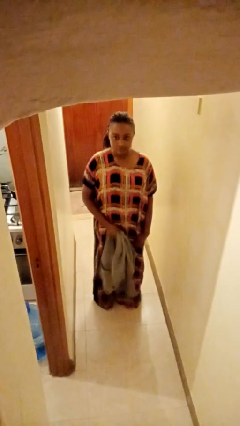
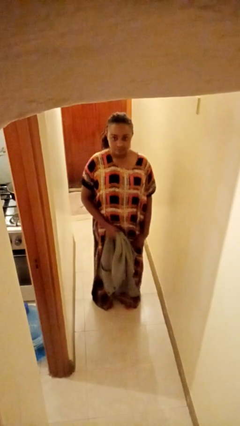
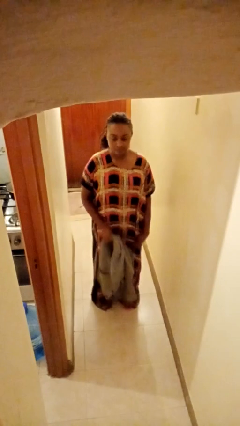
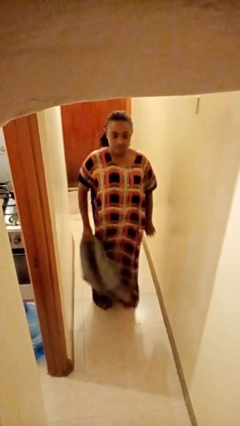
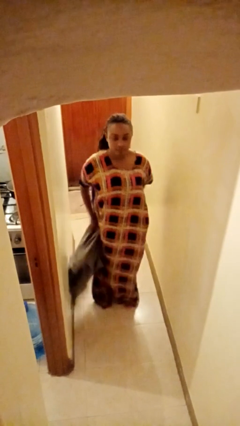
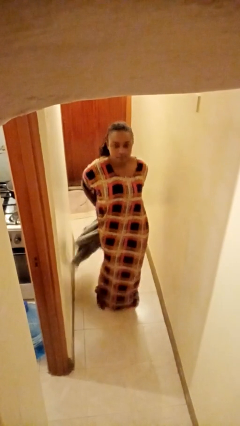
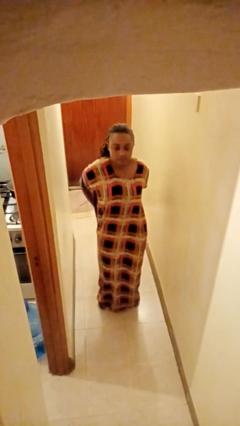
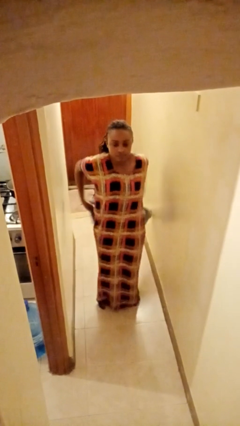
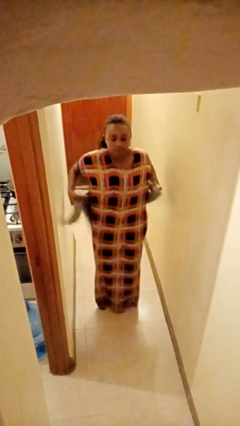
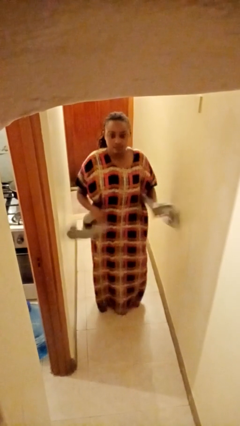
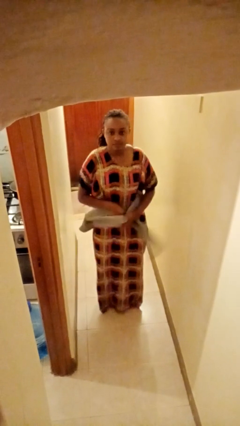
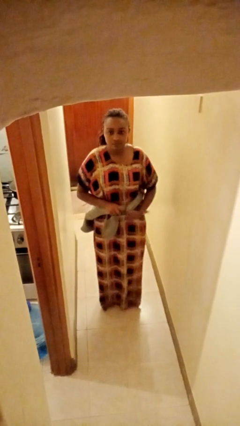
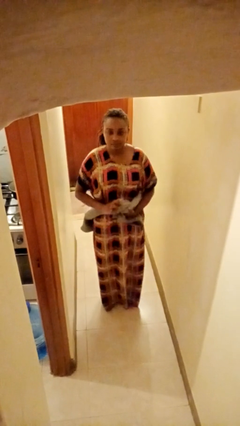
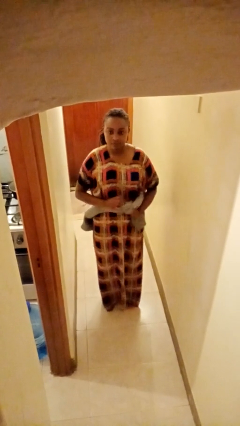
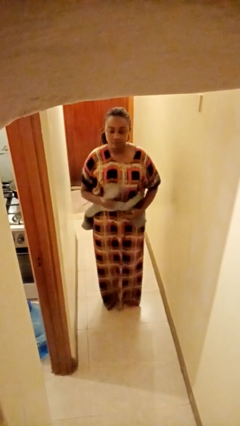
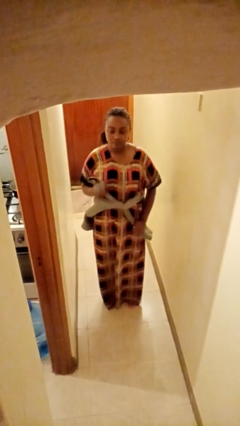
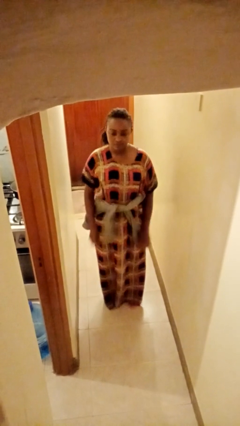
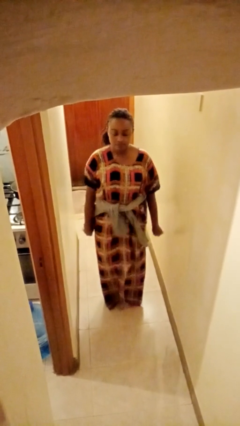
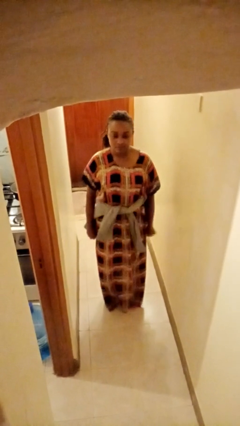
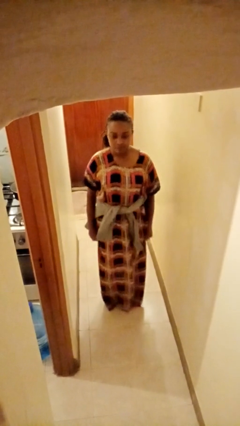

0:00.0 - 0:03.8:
person ties jacket around waist

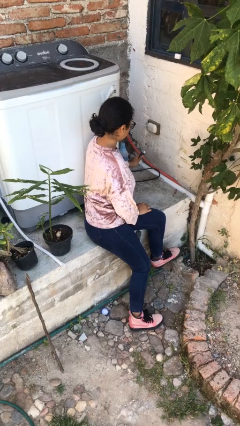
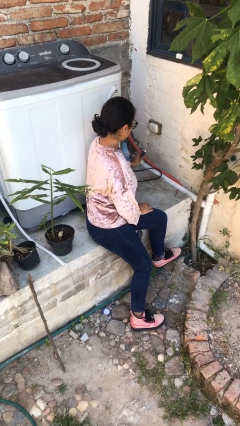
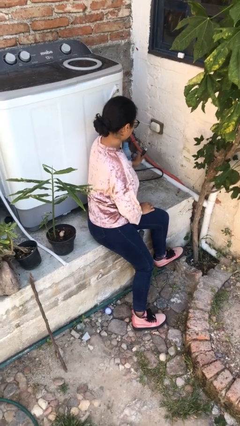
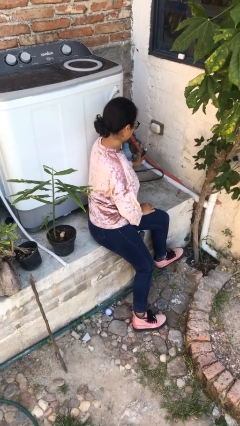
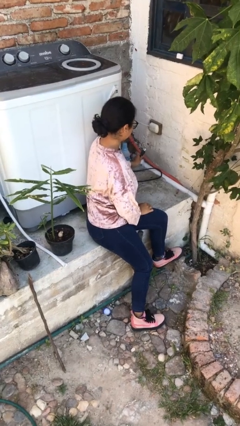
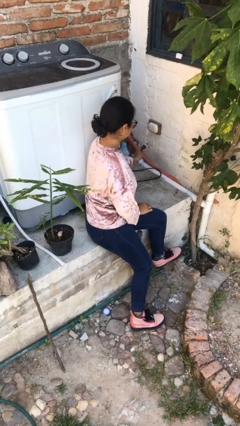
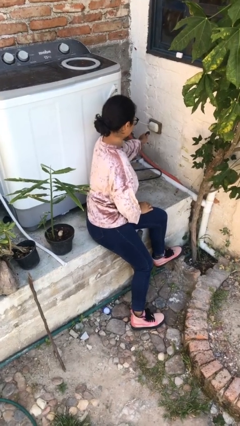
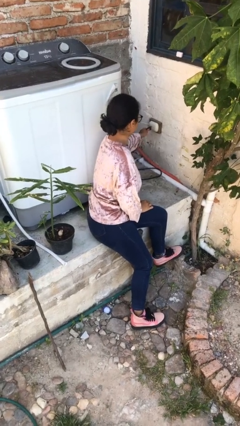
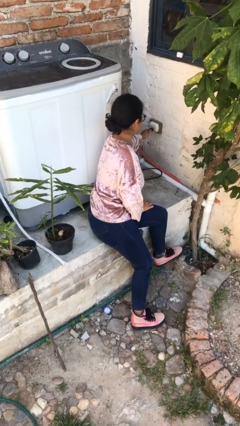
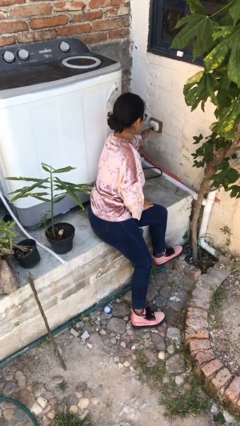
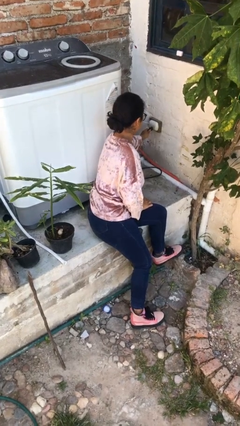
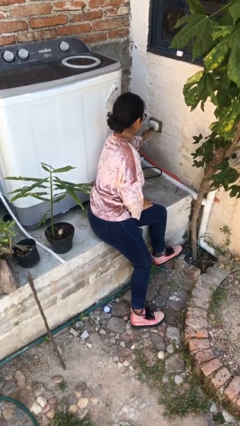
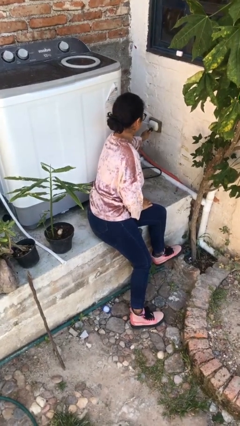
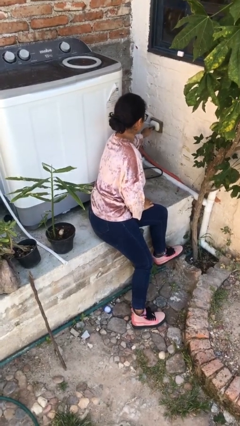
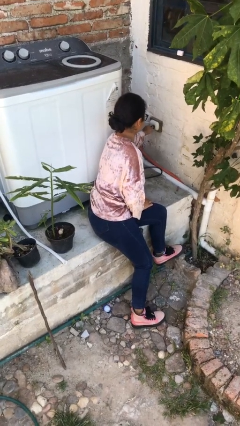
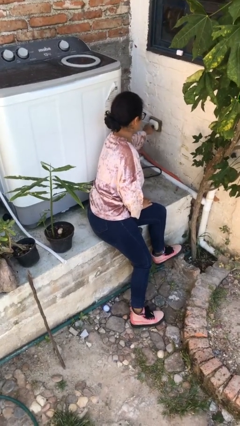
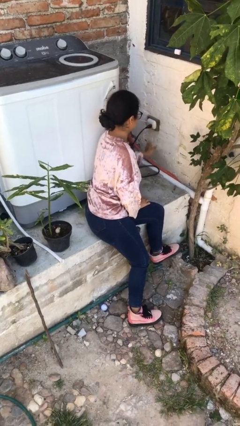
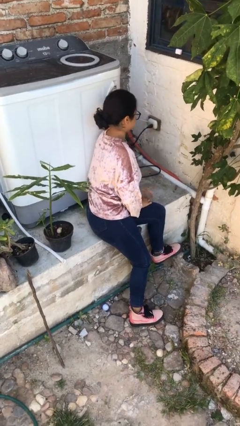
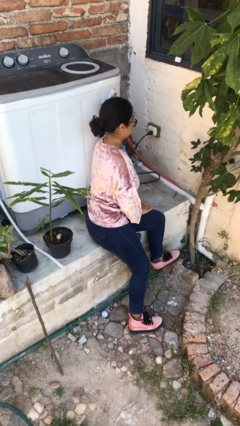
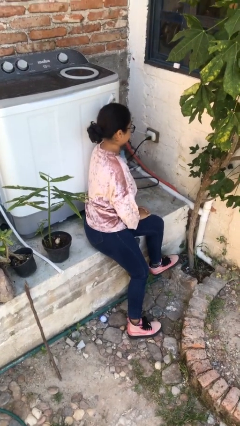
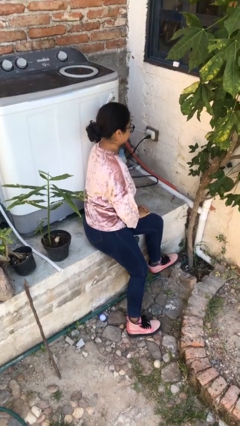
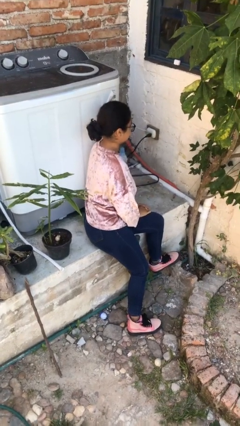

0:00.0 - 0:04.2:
person plugs into electrical socket

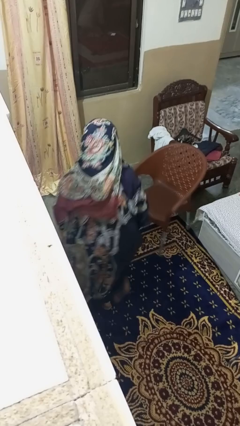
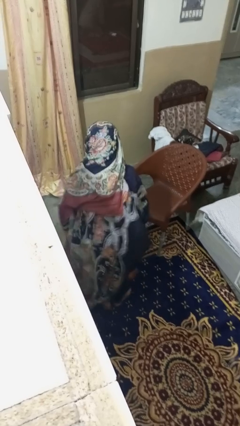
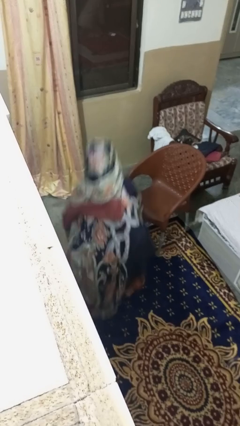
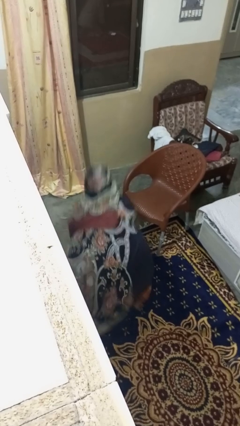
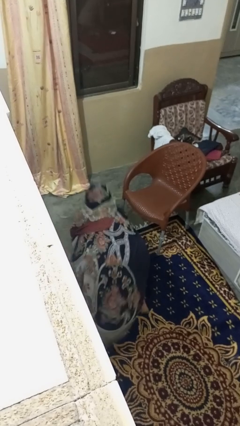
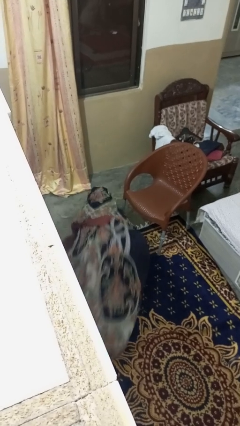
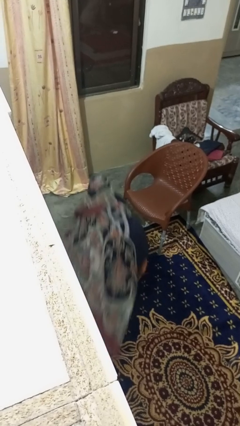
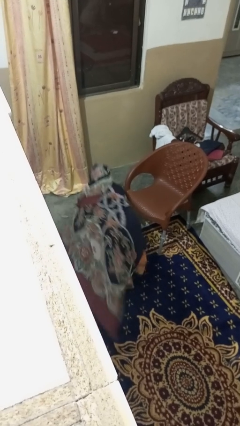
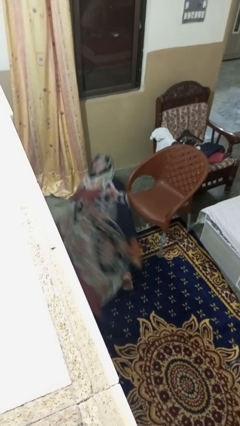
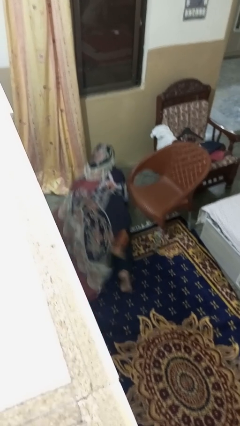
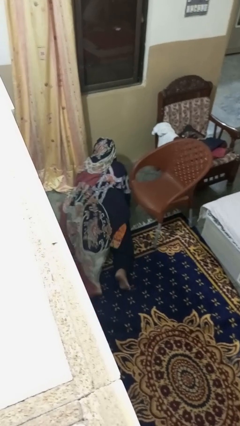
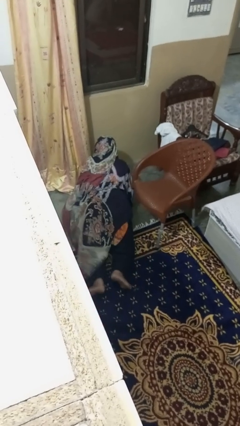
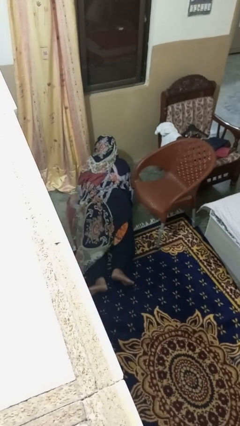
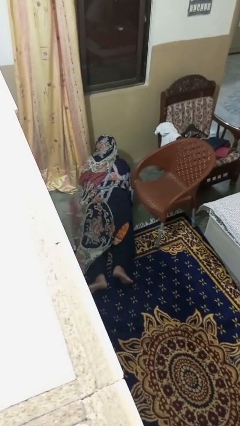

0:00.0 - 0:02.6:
person lies down on floor

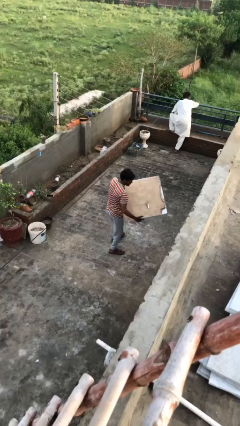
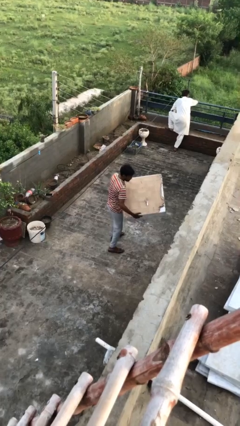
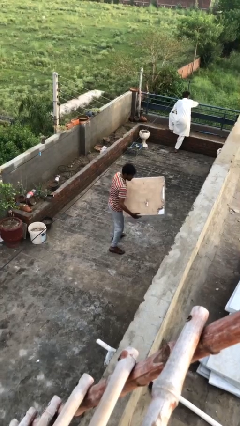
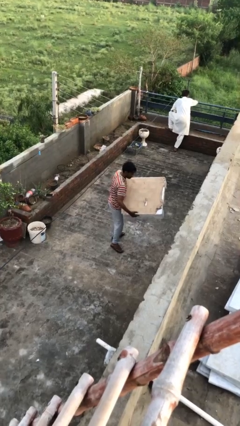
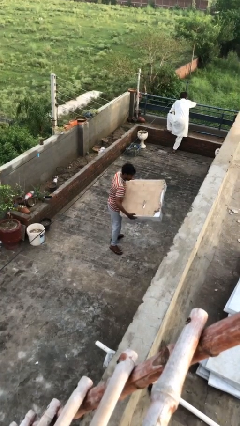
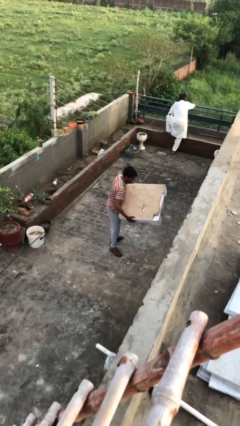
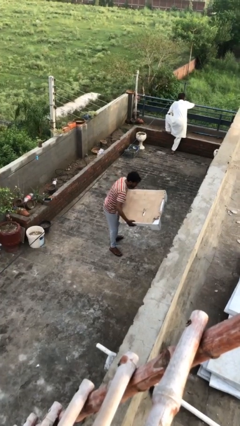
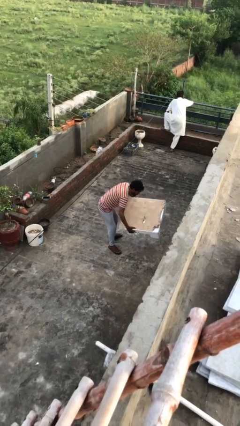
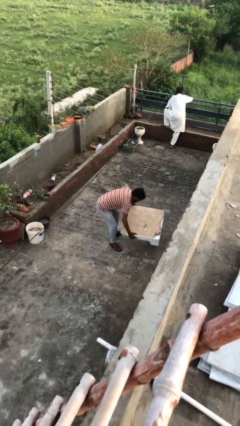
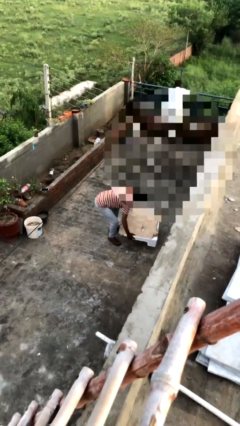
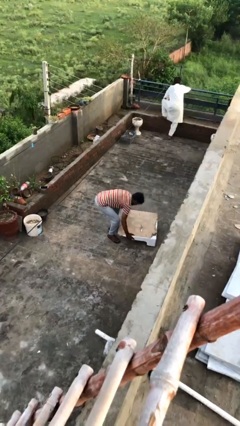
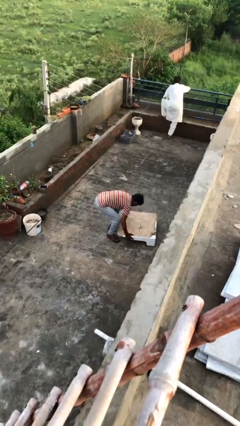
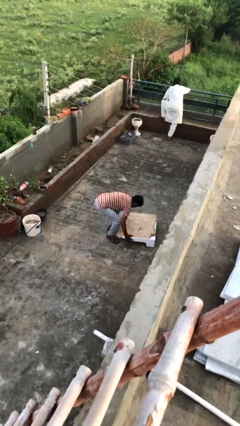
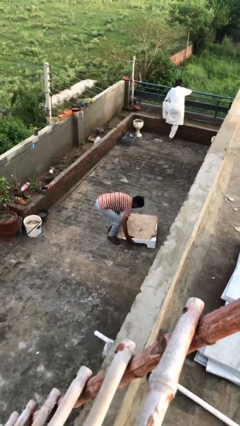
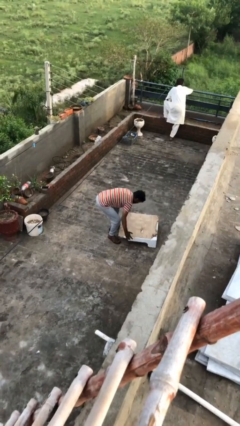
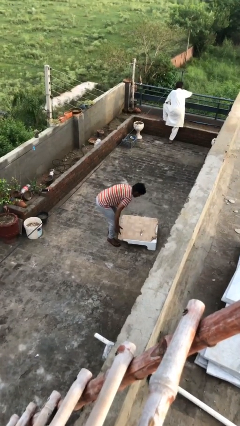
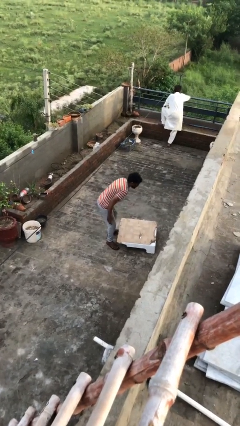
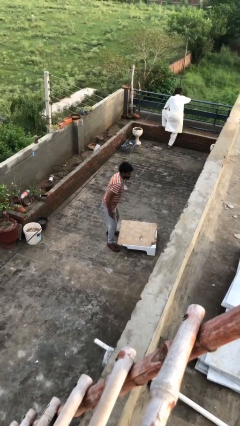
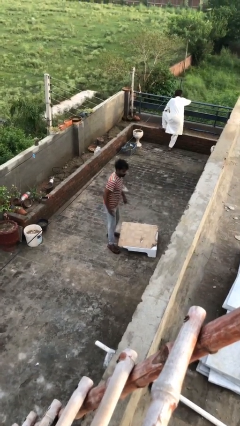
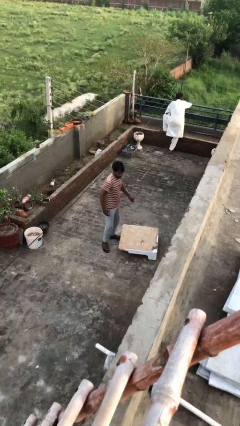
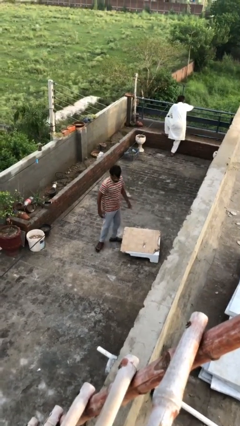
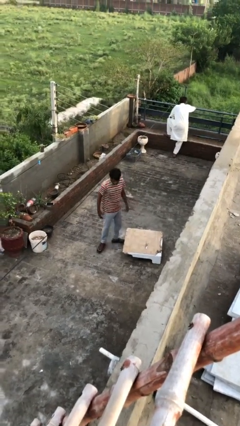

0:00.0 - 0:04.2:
person puts down object on floor

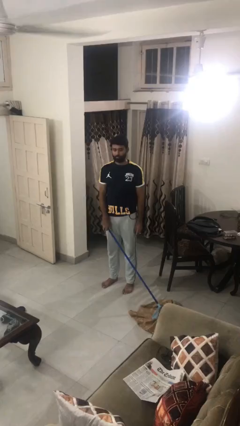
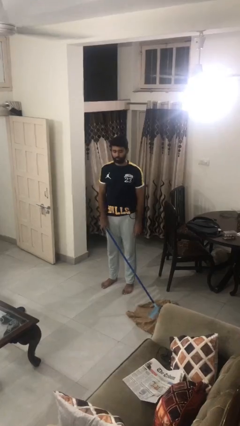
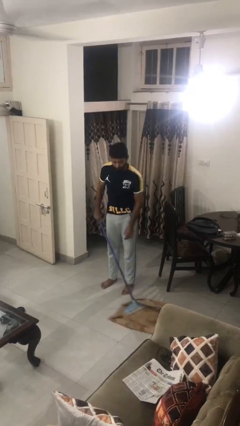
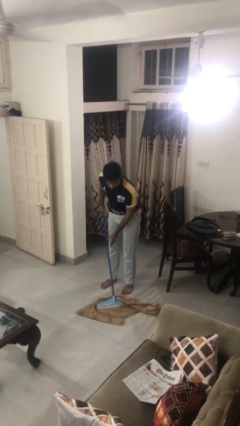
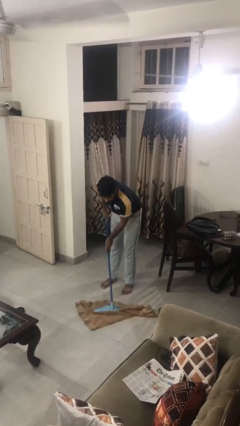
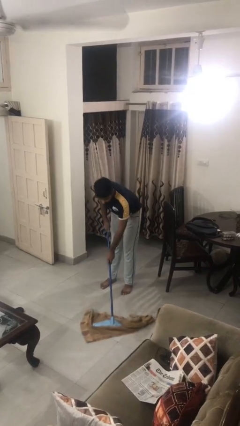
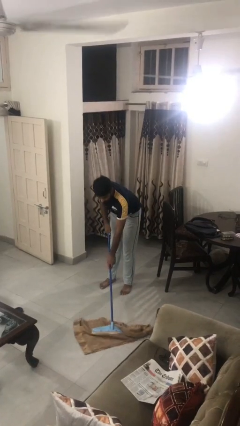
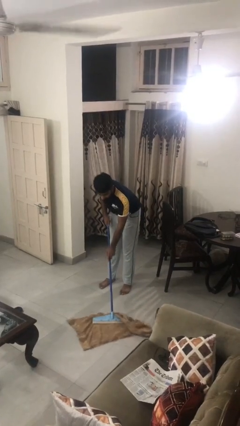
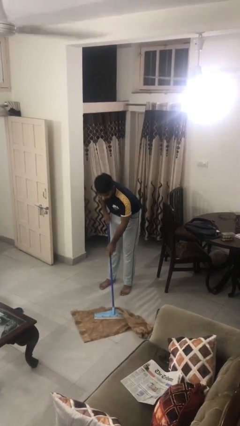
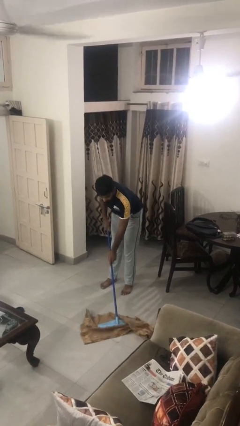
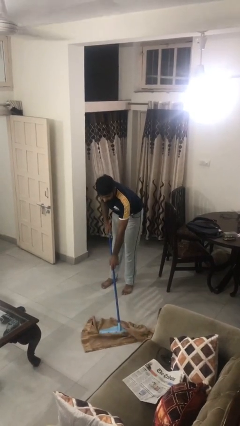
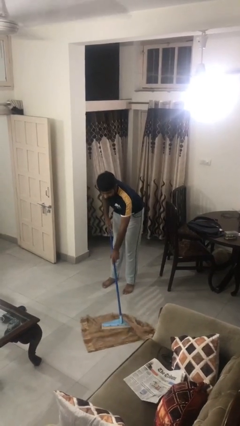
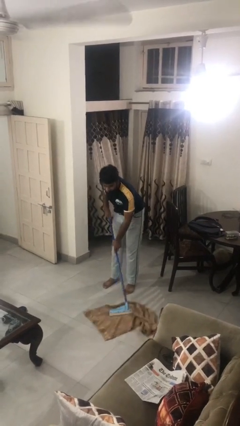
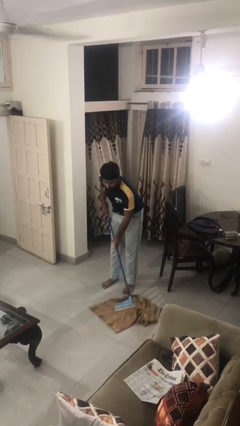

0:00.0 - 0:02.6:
person mops
